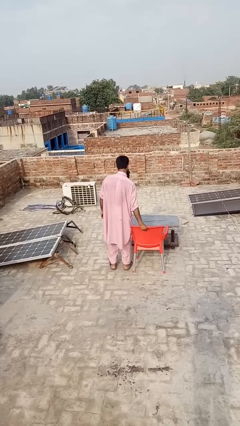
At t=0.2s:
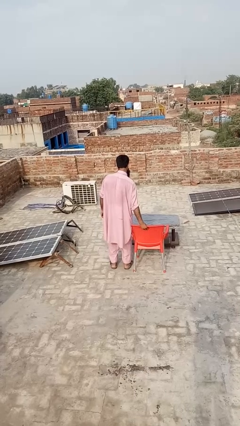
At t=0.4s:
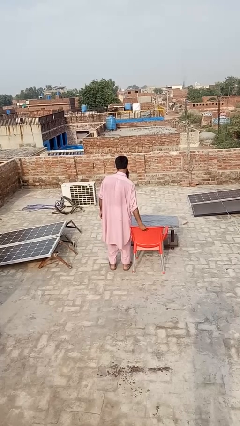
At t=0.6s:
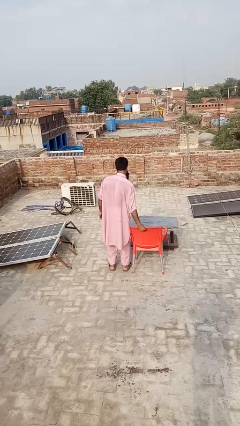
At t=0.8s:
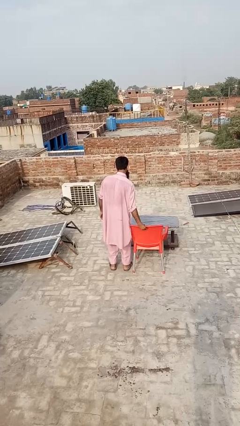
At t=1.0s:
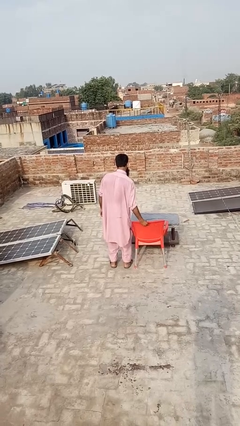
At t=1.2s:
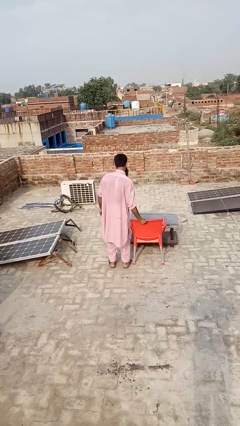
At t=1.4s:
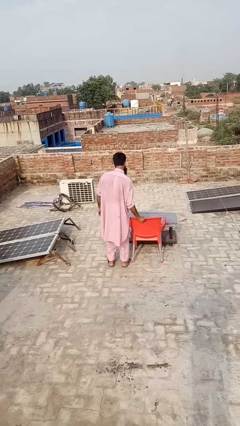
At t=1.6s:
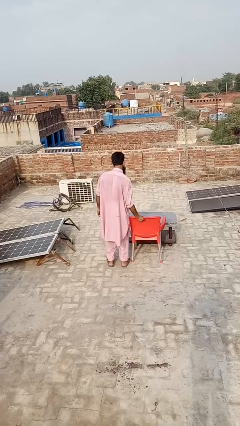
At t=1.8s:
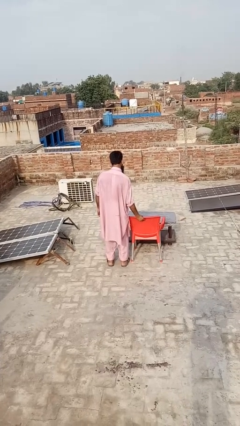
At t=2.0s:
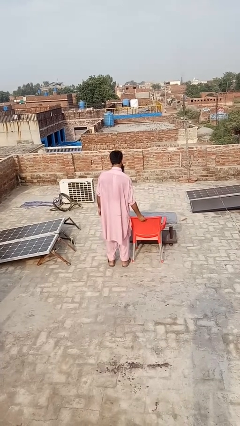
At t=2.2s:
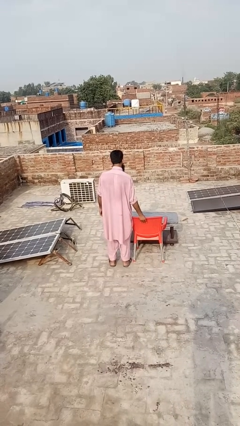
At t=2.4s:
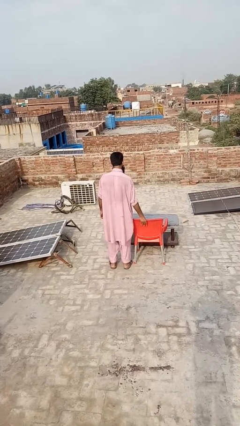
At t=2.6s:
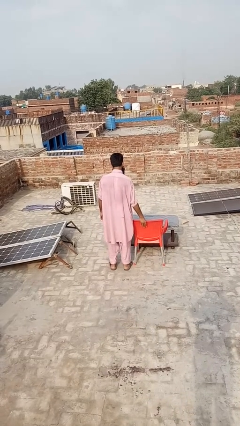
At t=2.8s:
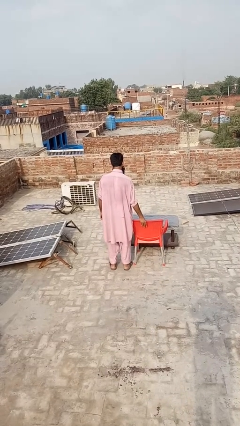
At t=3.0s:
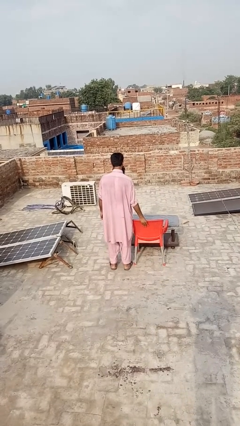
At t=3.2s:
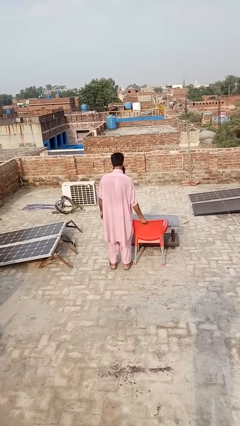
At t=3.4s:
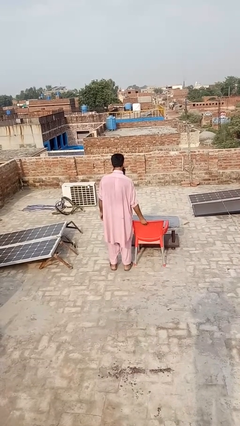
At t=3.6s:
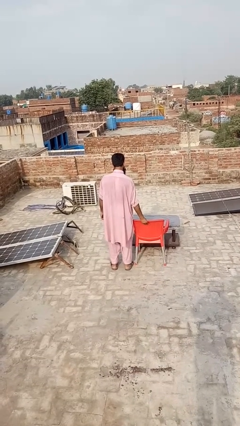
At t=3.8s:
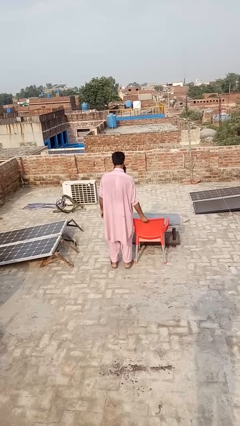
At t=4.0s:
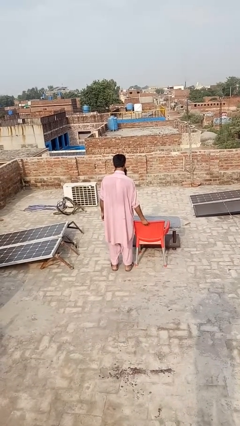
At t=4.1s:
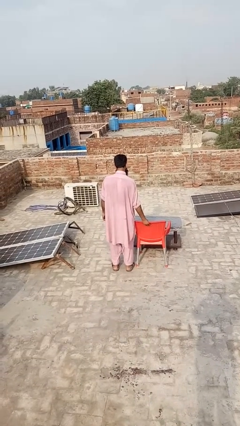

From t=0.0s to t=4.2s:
person pushes in chair

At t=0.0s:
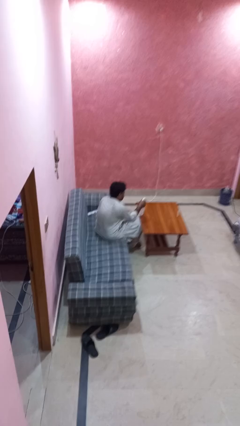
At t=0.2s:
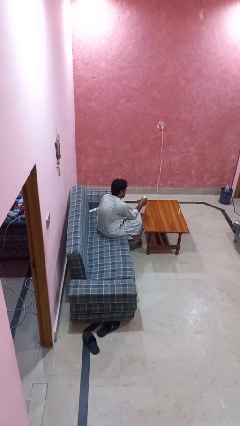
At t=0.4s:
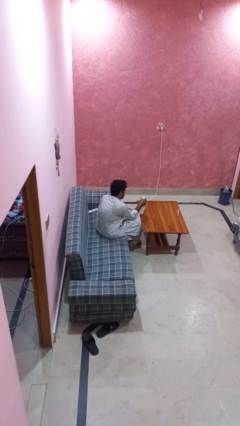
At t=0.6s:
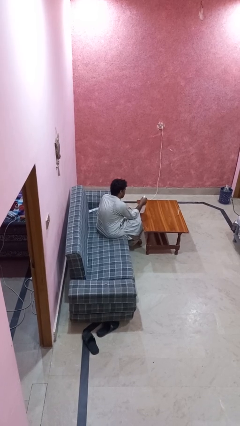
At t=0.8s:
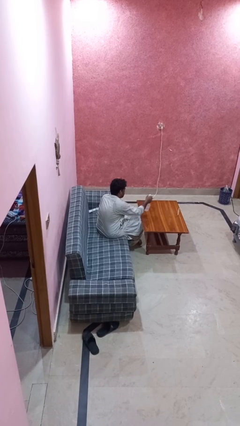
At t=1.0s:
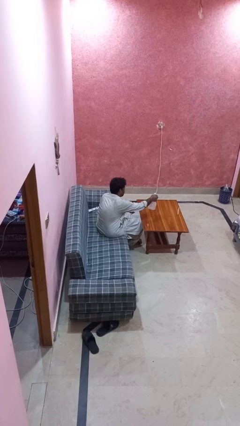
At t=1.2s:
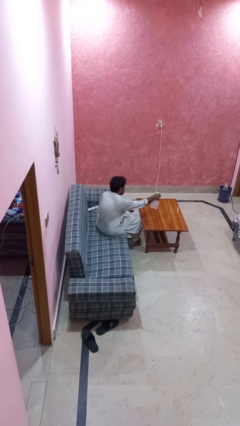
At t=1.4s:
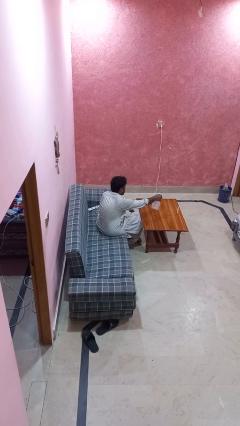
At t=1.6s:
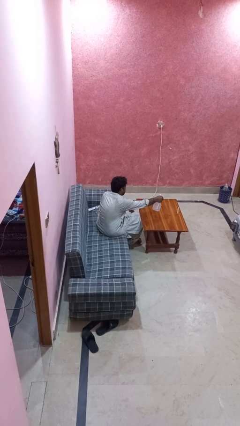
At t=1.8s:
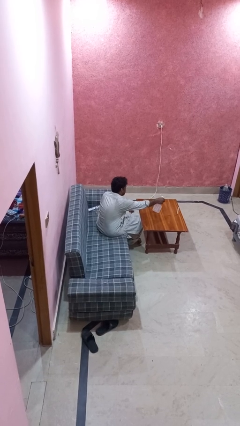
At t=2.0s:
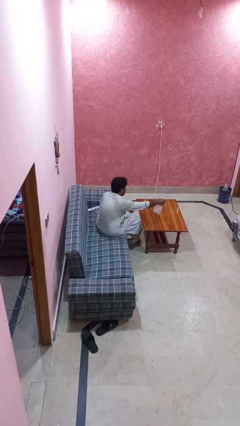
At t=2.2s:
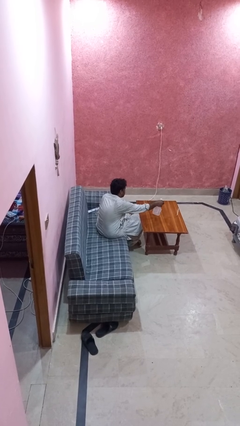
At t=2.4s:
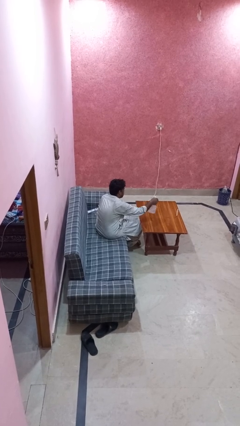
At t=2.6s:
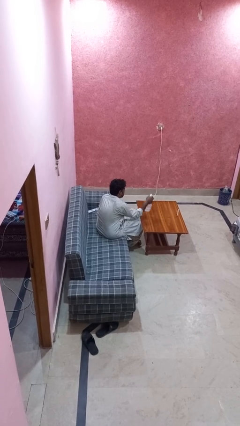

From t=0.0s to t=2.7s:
person sprays from bottle

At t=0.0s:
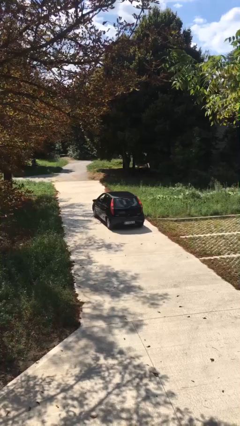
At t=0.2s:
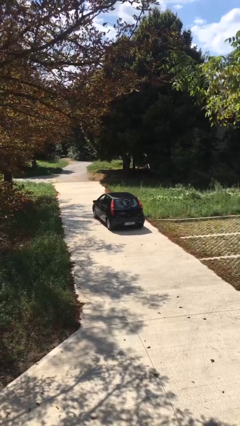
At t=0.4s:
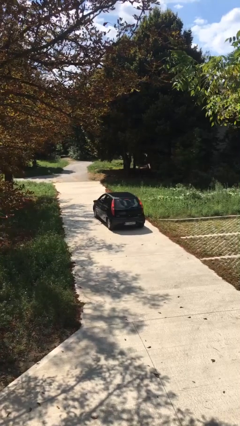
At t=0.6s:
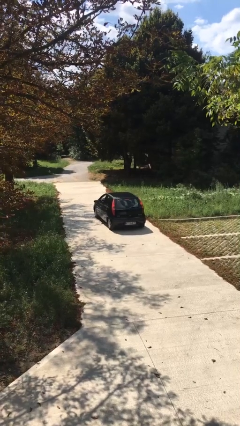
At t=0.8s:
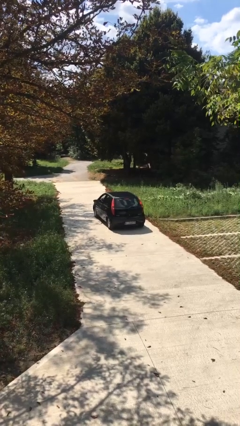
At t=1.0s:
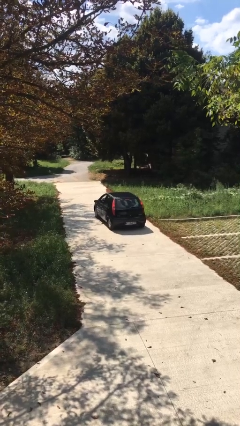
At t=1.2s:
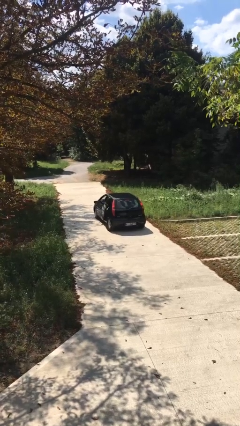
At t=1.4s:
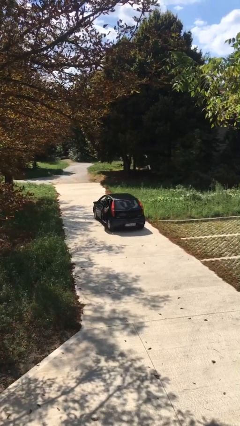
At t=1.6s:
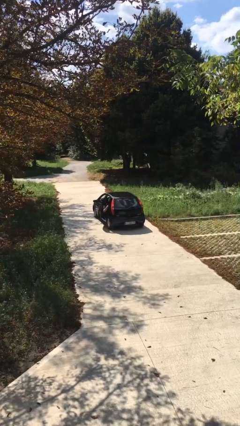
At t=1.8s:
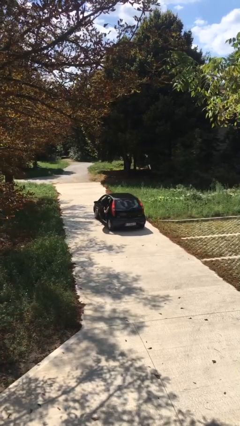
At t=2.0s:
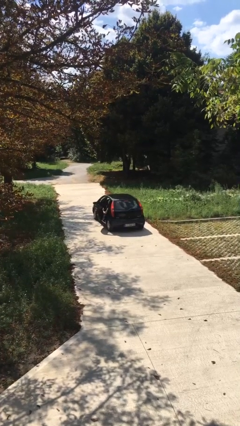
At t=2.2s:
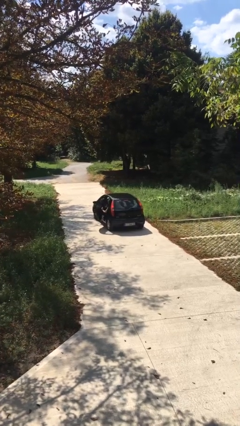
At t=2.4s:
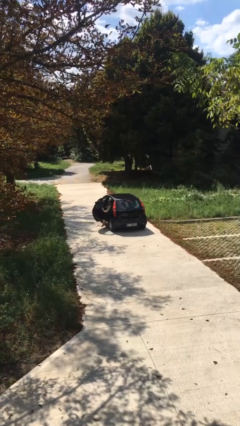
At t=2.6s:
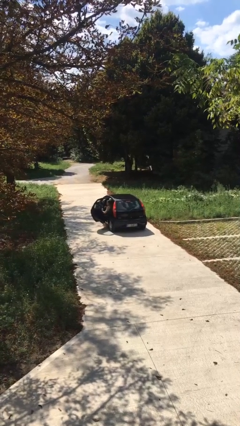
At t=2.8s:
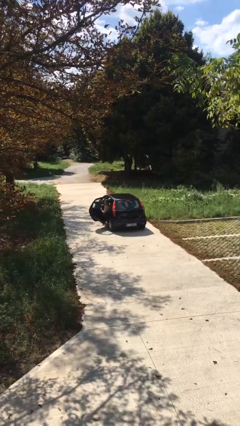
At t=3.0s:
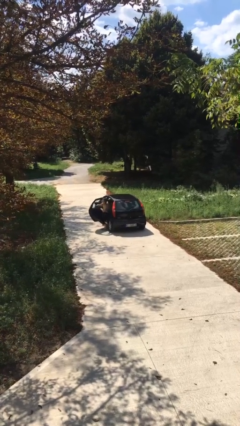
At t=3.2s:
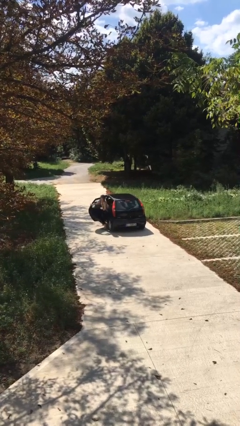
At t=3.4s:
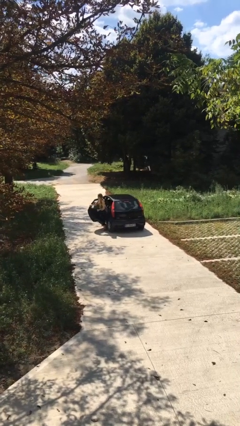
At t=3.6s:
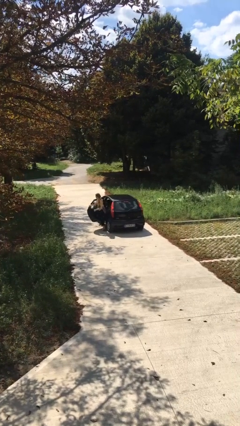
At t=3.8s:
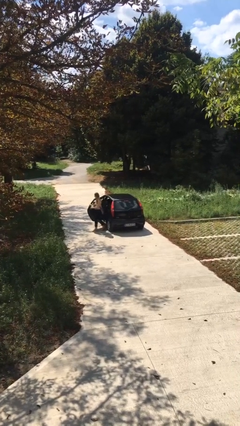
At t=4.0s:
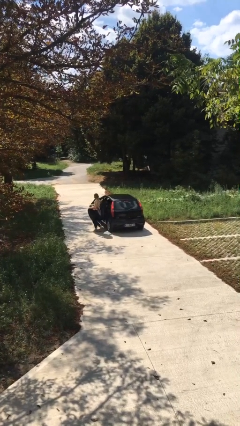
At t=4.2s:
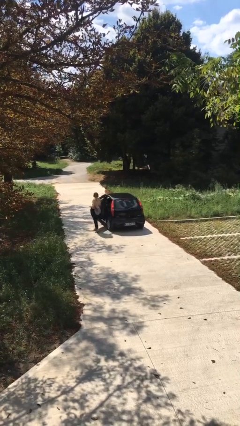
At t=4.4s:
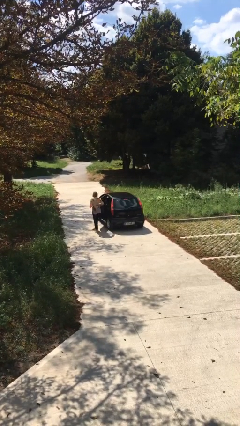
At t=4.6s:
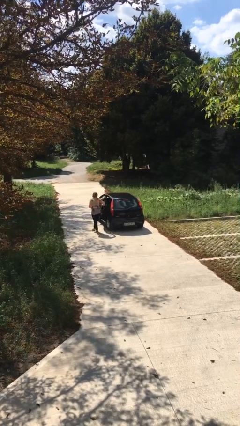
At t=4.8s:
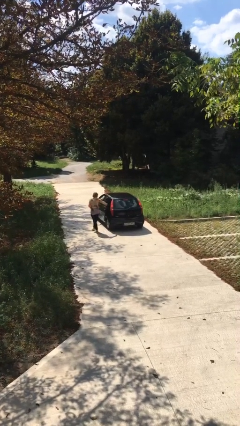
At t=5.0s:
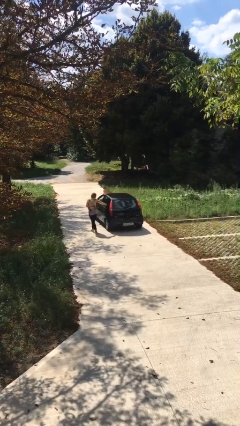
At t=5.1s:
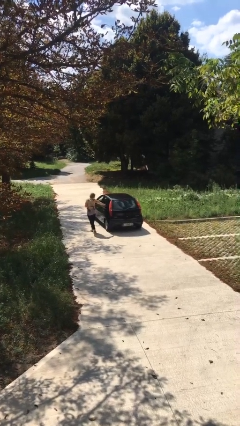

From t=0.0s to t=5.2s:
car drops off person

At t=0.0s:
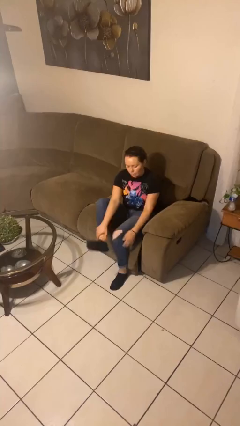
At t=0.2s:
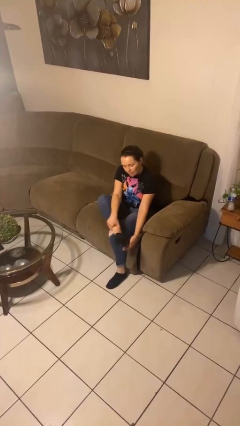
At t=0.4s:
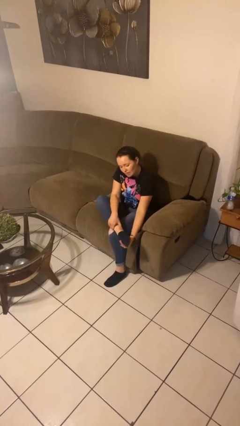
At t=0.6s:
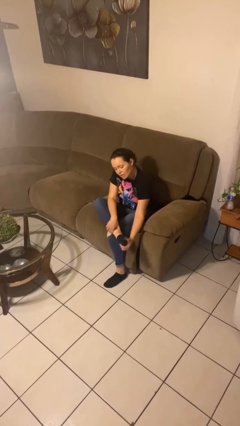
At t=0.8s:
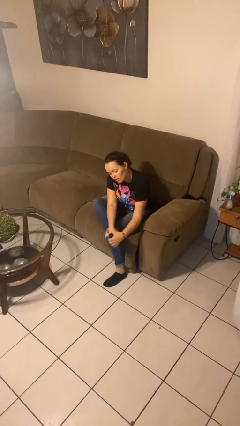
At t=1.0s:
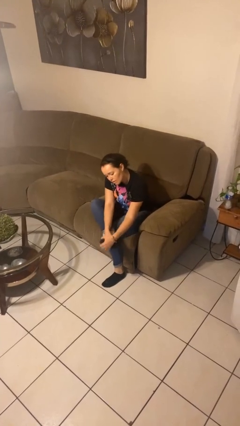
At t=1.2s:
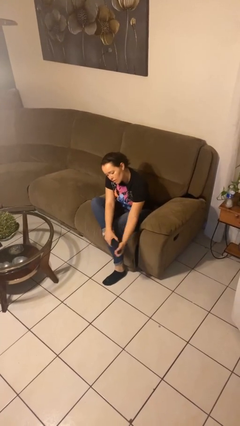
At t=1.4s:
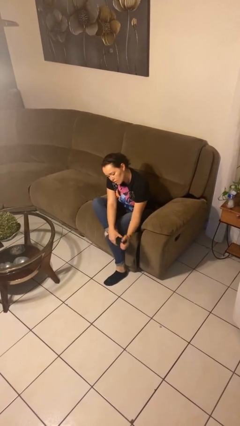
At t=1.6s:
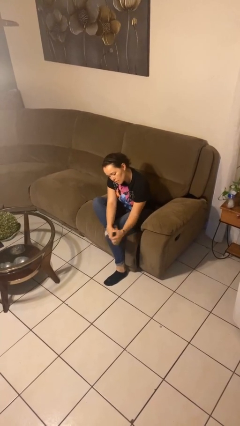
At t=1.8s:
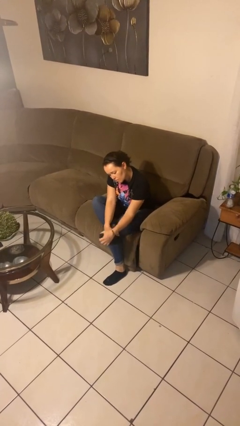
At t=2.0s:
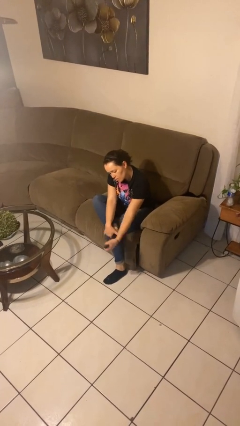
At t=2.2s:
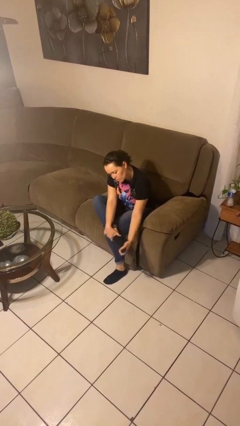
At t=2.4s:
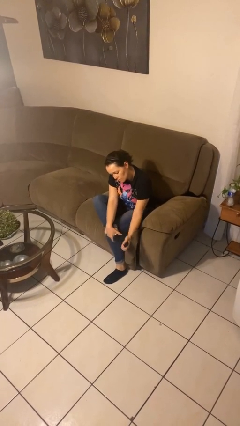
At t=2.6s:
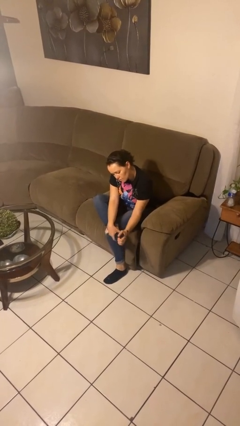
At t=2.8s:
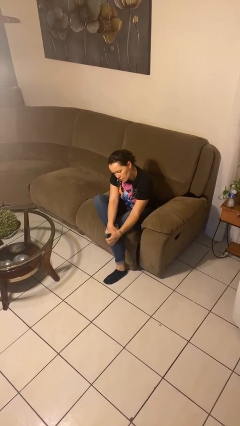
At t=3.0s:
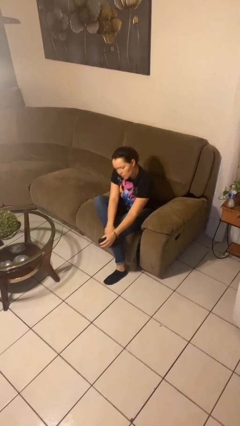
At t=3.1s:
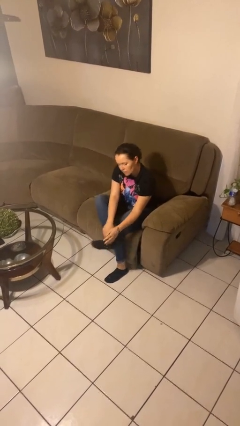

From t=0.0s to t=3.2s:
person rubs foot

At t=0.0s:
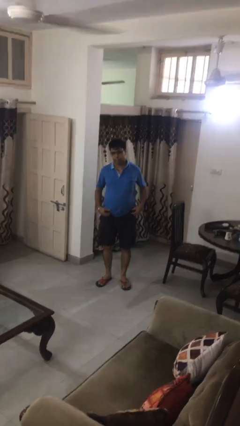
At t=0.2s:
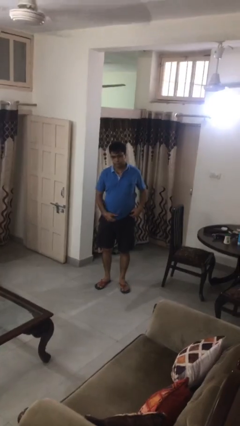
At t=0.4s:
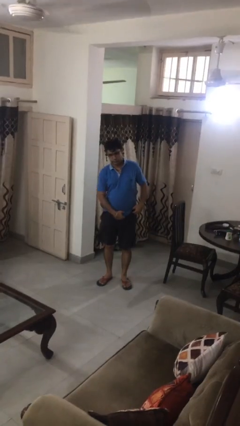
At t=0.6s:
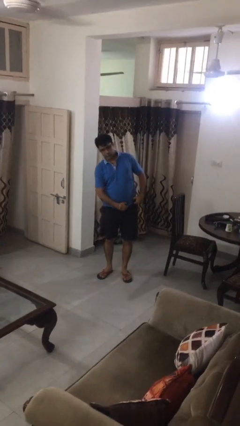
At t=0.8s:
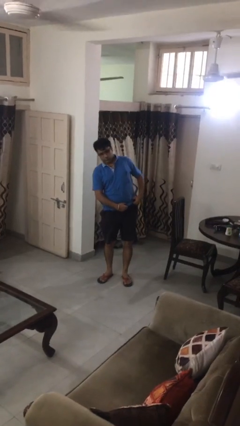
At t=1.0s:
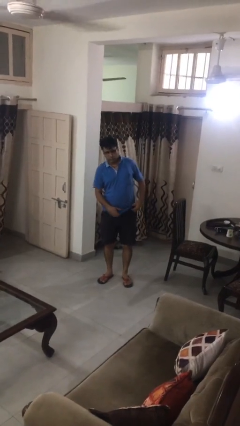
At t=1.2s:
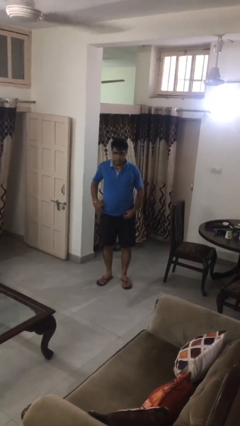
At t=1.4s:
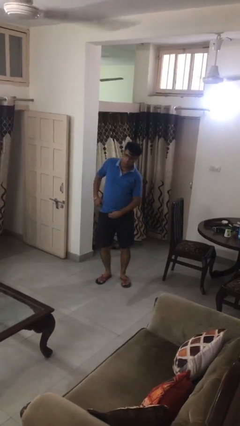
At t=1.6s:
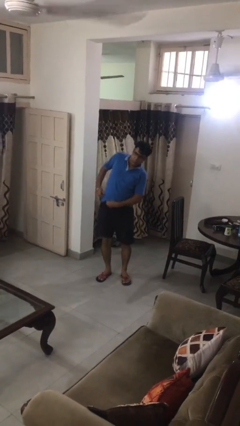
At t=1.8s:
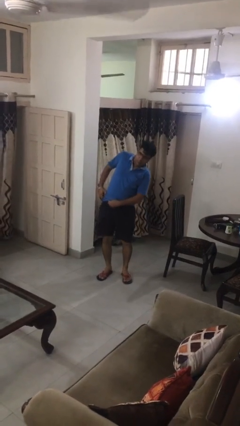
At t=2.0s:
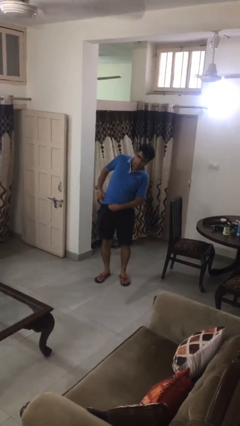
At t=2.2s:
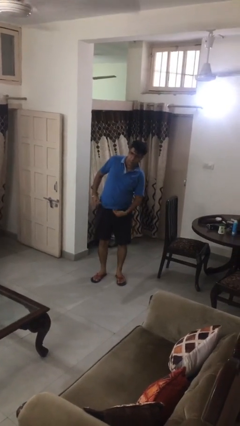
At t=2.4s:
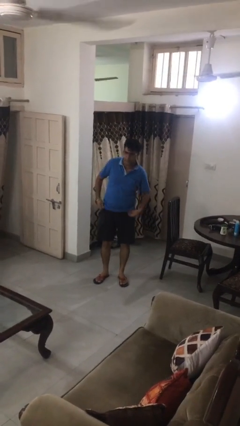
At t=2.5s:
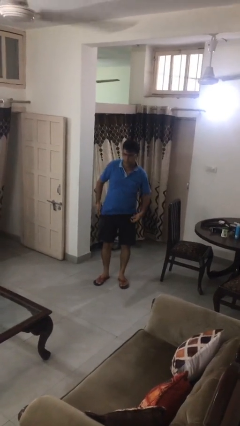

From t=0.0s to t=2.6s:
person hikes up pants
